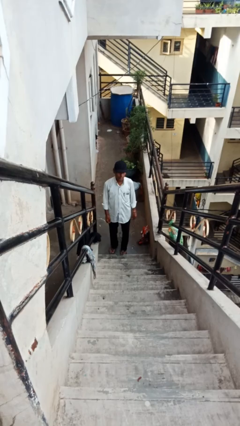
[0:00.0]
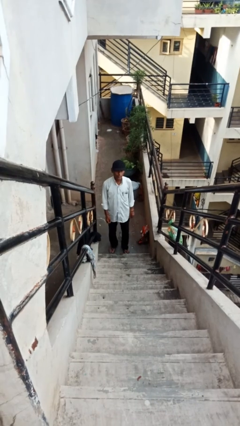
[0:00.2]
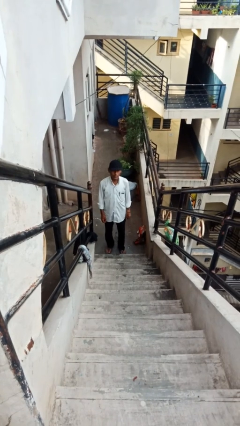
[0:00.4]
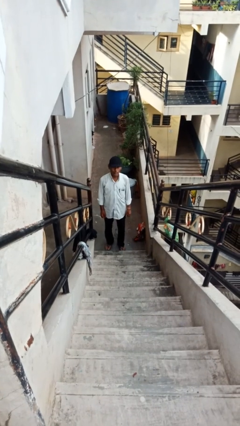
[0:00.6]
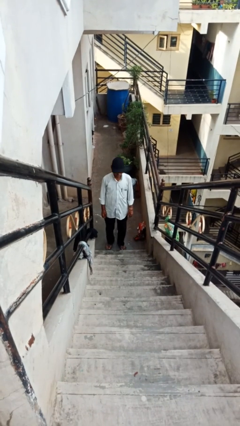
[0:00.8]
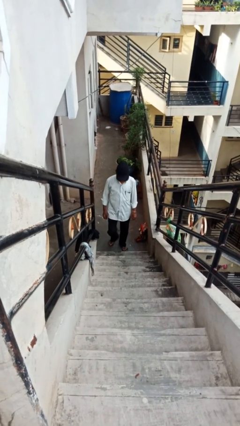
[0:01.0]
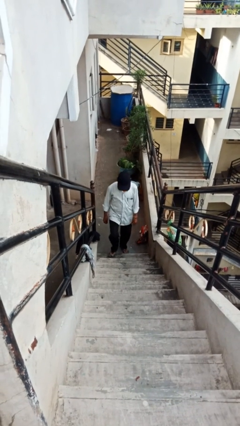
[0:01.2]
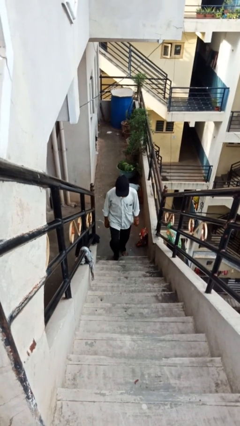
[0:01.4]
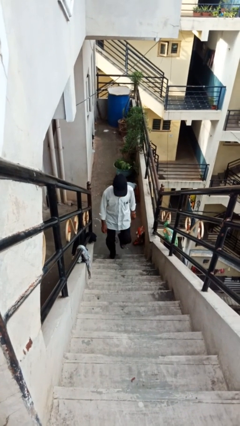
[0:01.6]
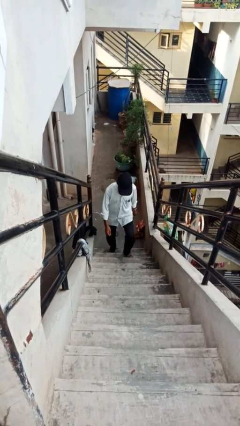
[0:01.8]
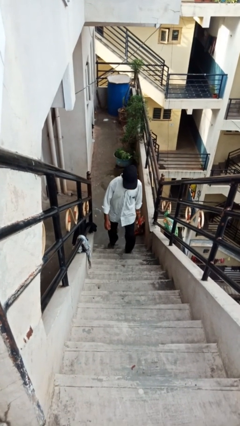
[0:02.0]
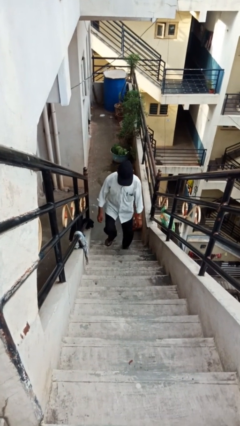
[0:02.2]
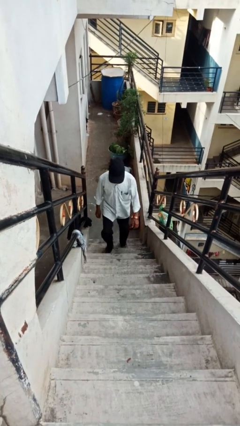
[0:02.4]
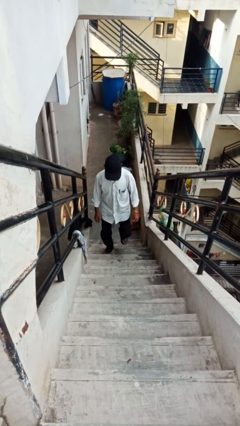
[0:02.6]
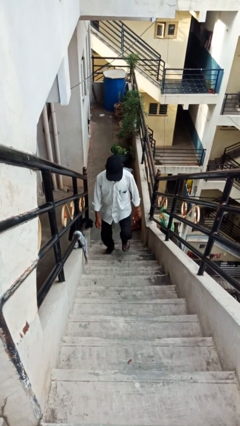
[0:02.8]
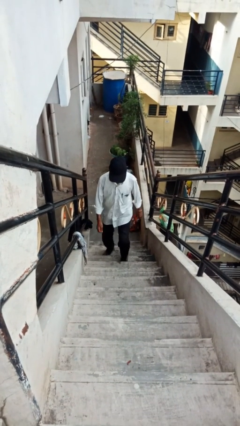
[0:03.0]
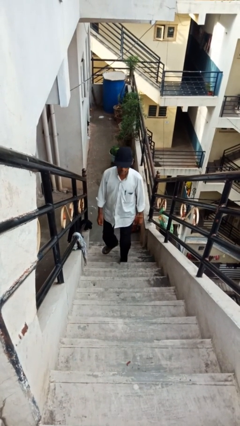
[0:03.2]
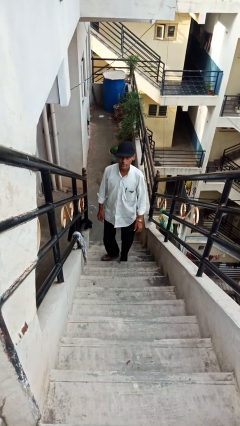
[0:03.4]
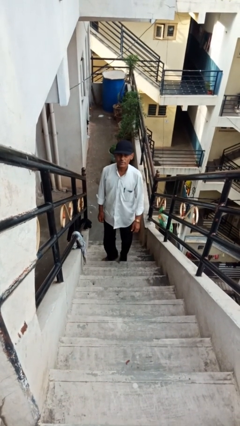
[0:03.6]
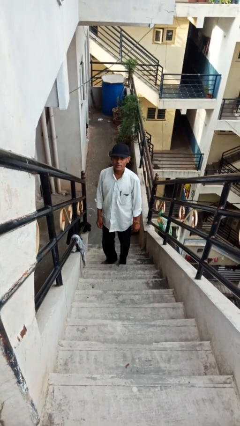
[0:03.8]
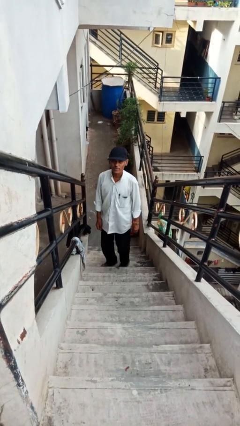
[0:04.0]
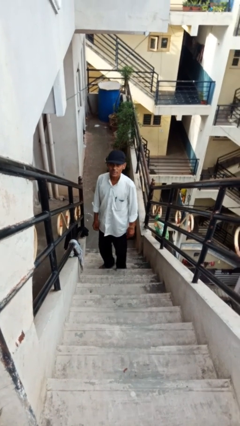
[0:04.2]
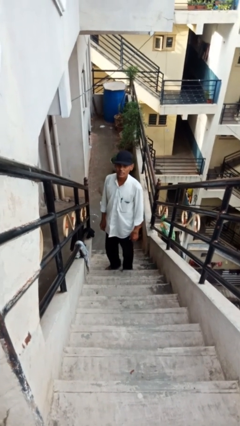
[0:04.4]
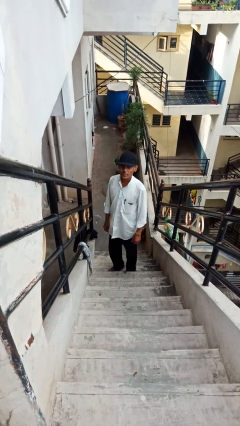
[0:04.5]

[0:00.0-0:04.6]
person climbs up stairs

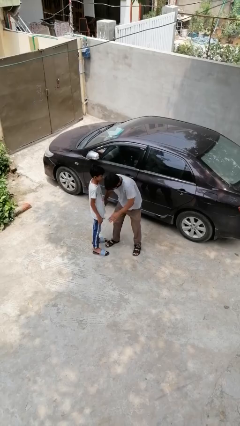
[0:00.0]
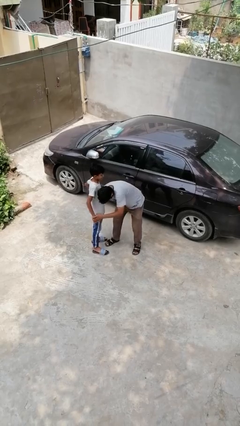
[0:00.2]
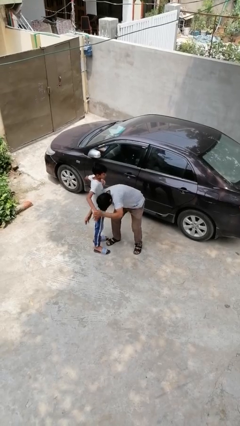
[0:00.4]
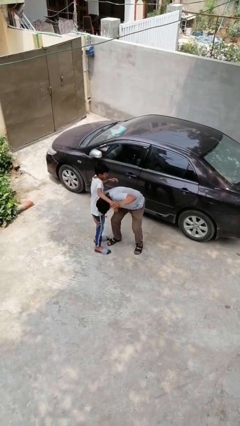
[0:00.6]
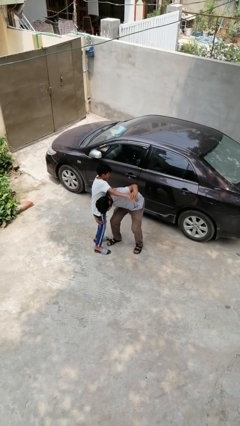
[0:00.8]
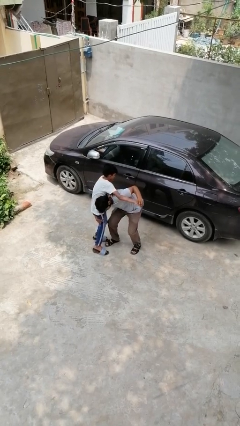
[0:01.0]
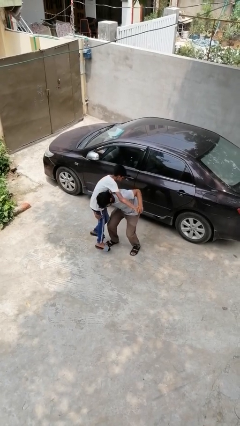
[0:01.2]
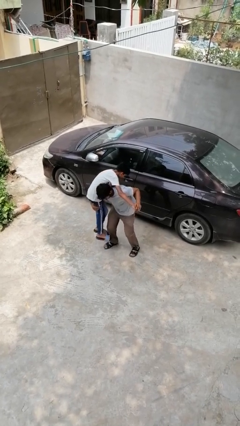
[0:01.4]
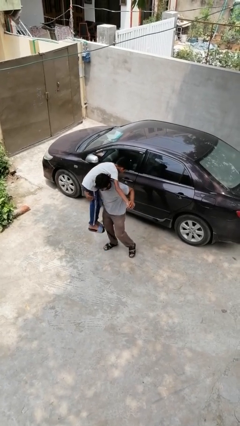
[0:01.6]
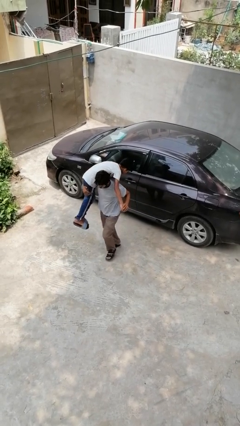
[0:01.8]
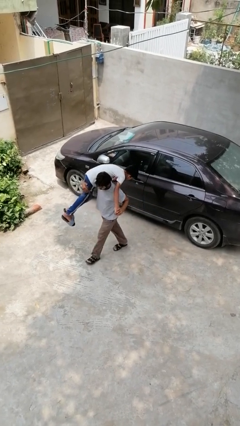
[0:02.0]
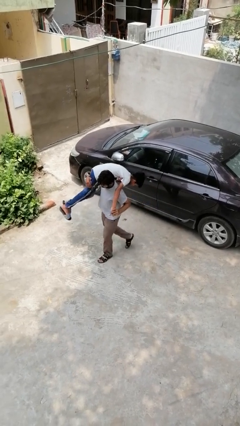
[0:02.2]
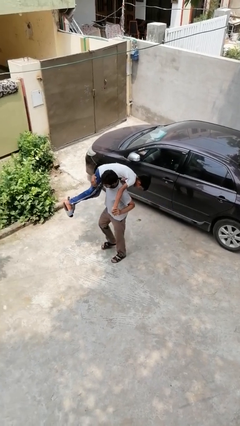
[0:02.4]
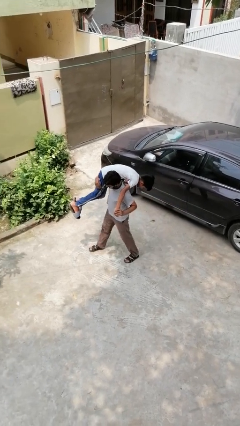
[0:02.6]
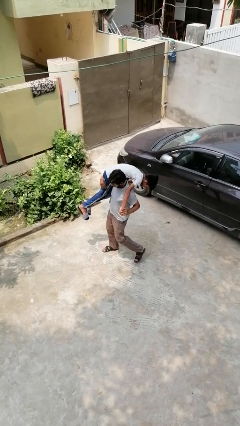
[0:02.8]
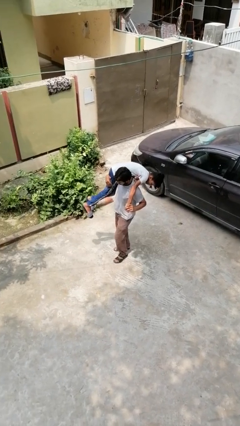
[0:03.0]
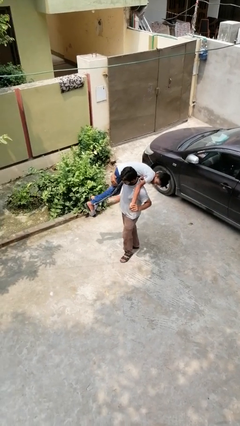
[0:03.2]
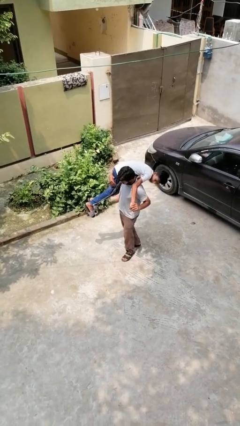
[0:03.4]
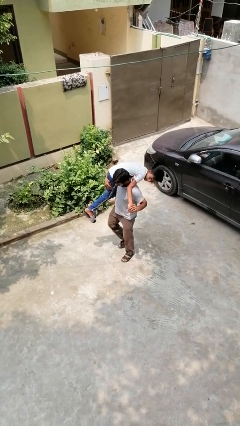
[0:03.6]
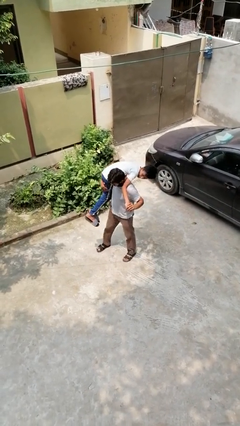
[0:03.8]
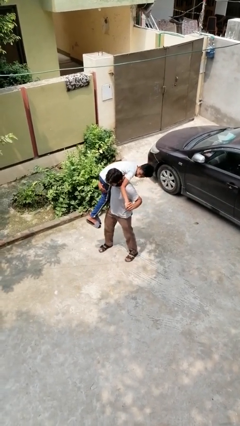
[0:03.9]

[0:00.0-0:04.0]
person carries person over shoulder

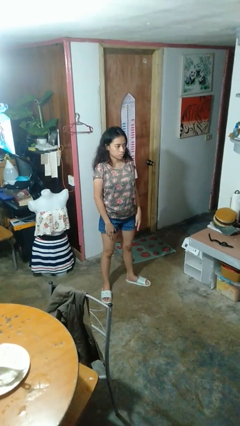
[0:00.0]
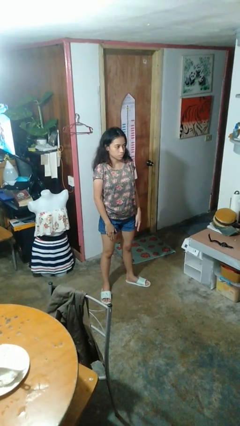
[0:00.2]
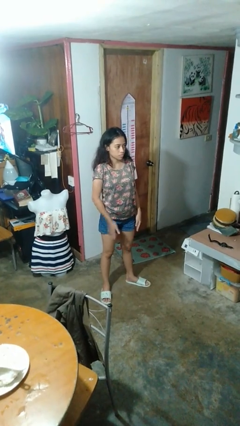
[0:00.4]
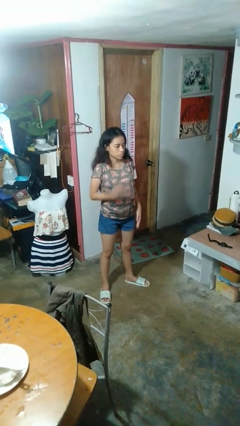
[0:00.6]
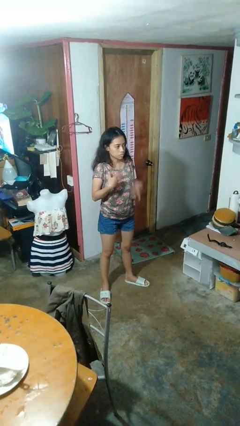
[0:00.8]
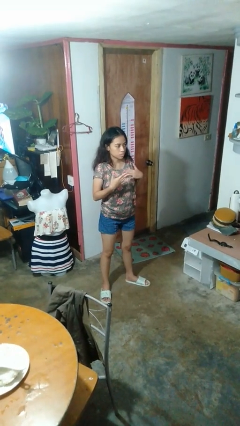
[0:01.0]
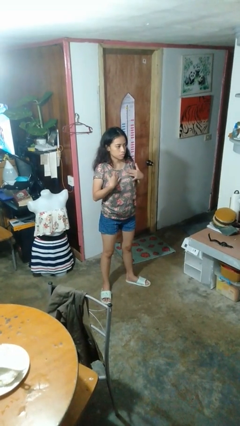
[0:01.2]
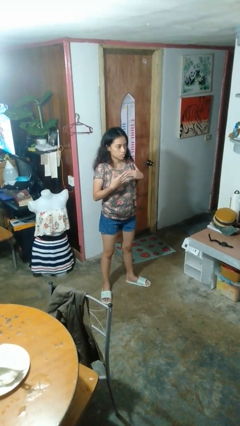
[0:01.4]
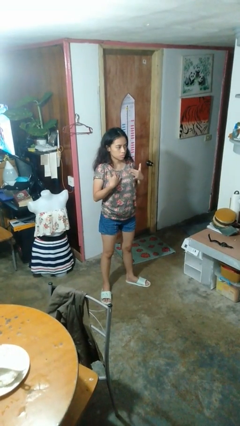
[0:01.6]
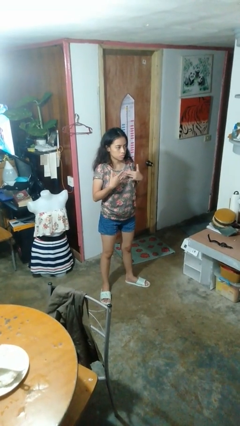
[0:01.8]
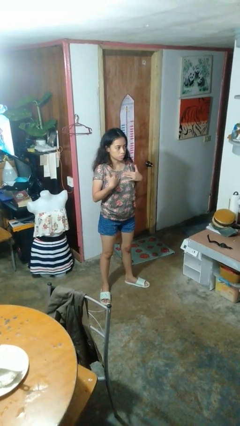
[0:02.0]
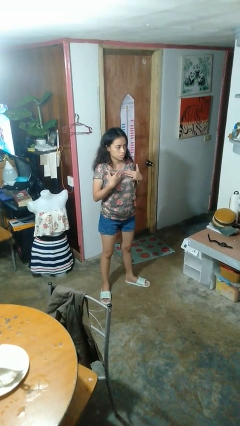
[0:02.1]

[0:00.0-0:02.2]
person drums on chest

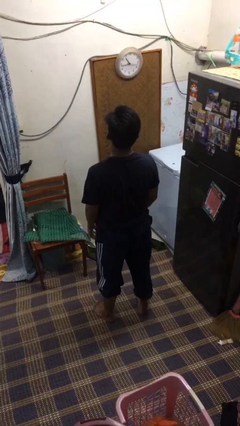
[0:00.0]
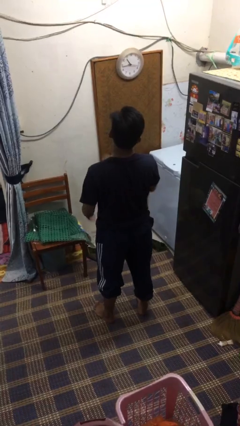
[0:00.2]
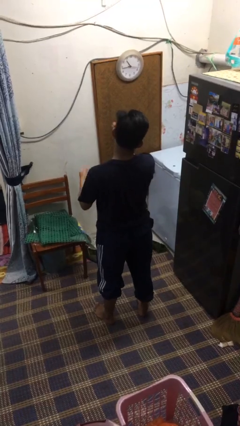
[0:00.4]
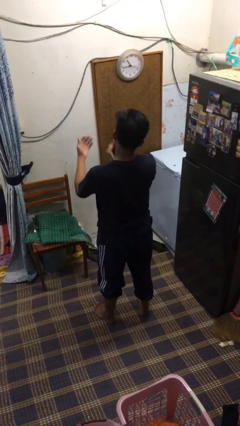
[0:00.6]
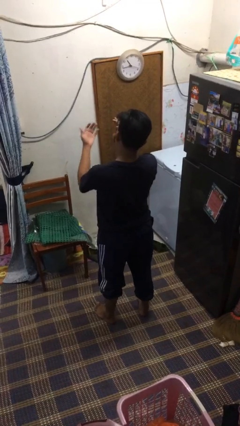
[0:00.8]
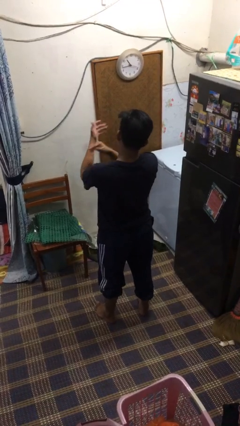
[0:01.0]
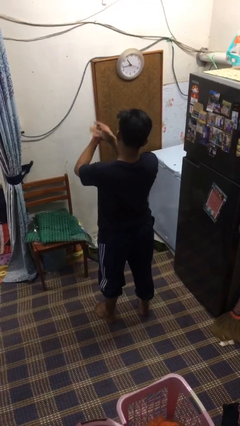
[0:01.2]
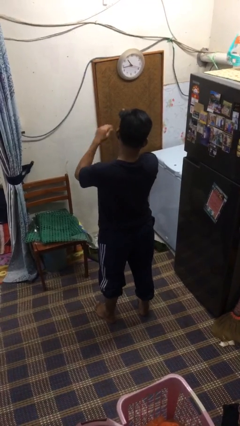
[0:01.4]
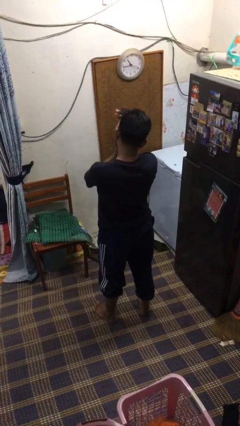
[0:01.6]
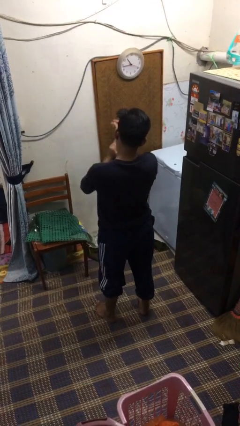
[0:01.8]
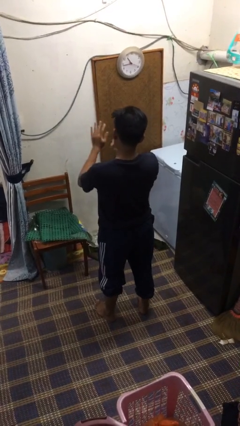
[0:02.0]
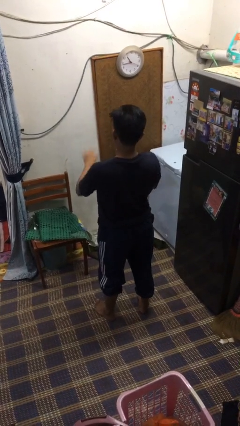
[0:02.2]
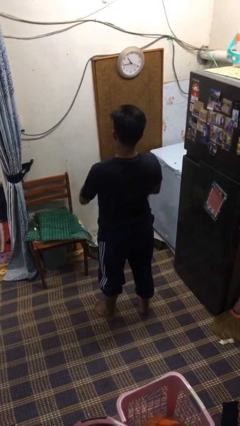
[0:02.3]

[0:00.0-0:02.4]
person swats bug

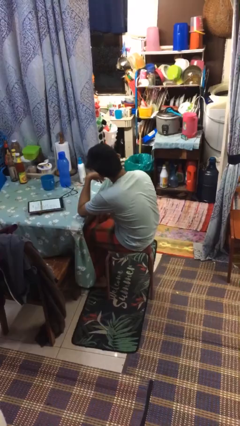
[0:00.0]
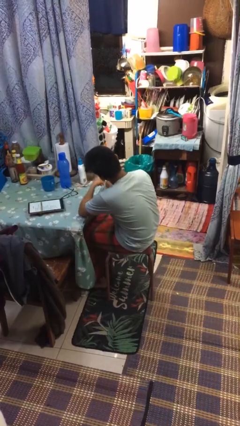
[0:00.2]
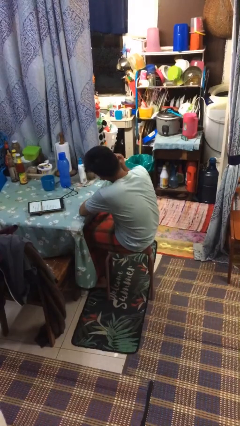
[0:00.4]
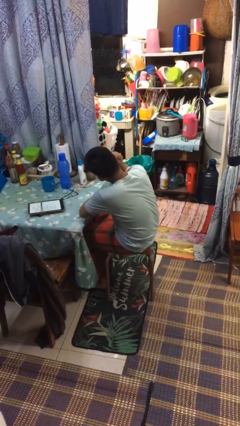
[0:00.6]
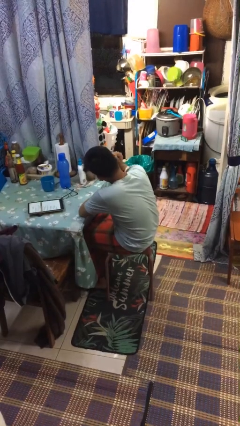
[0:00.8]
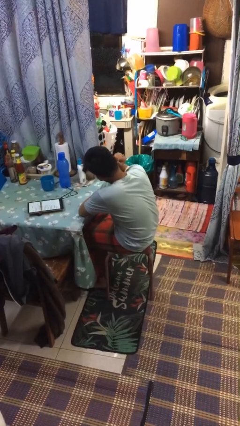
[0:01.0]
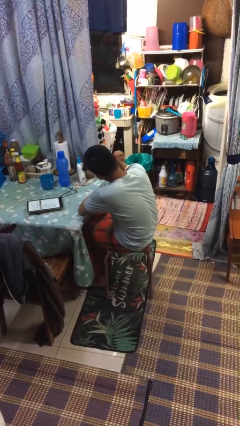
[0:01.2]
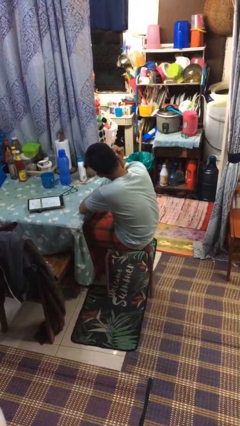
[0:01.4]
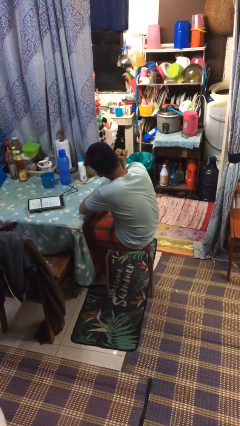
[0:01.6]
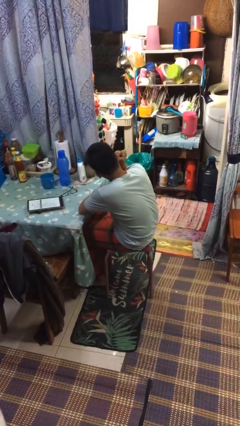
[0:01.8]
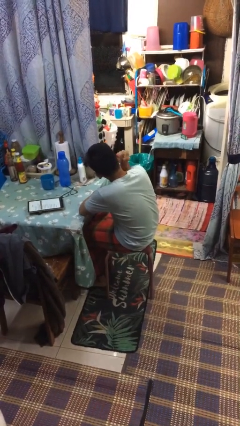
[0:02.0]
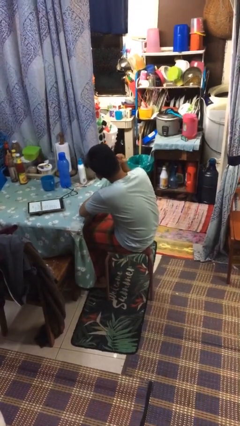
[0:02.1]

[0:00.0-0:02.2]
person touches earlobe

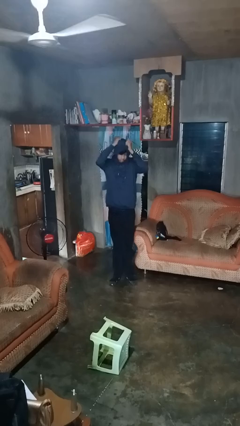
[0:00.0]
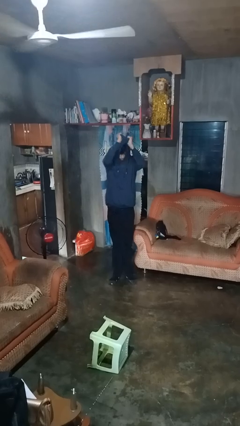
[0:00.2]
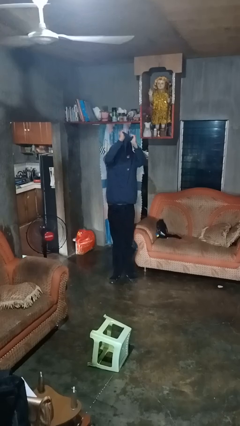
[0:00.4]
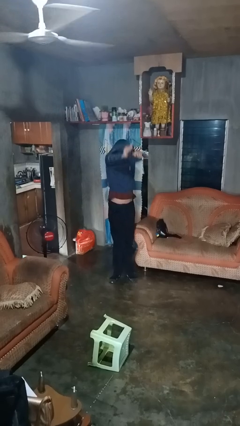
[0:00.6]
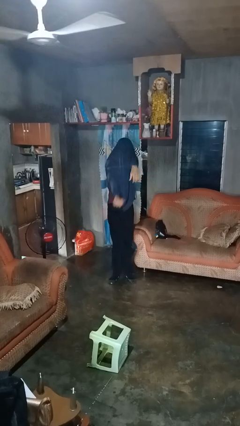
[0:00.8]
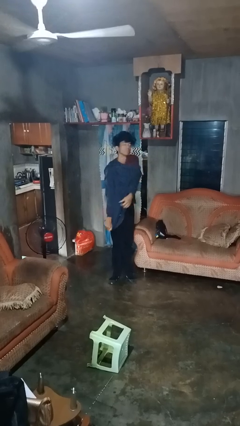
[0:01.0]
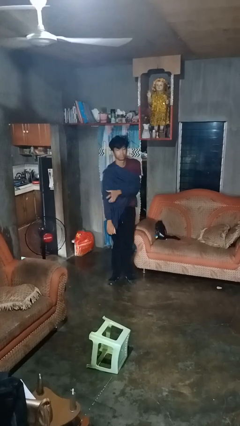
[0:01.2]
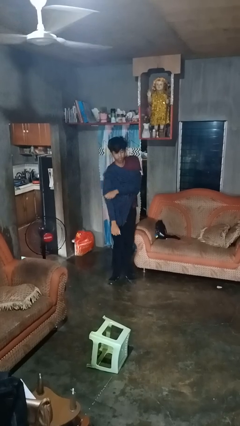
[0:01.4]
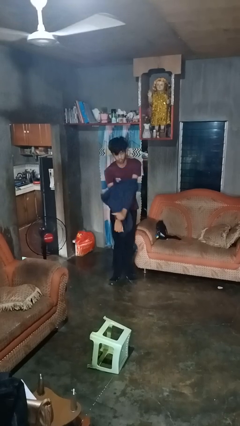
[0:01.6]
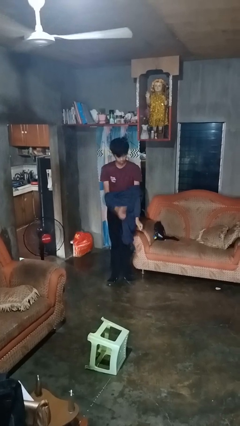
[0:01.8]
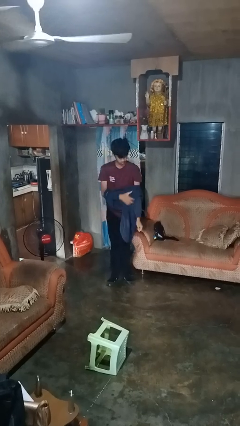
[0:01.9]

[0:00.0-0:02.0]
person takes off hoodie
